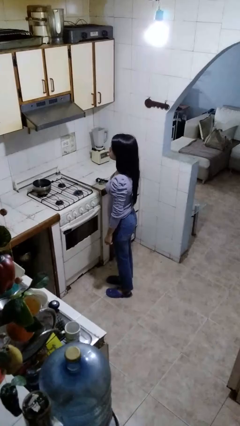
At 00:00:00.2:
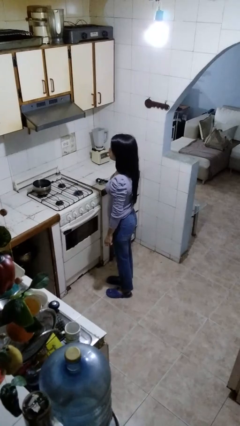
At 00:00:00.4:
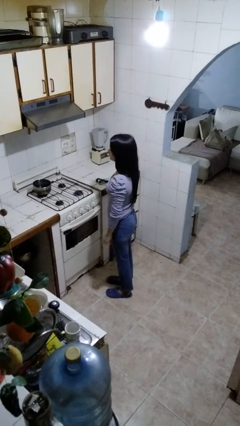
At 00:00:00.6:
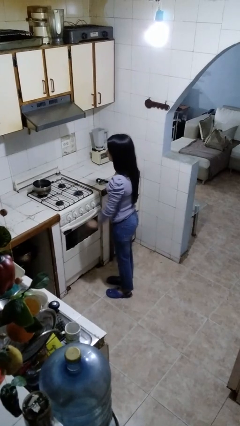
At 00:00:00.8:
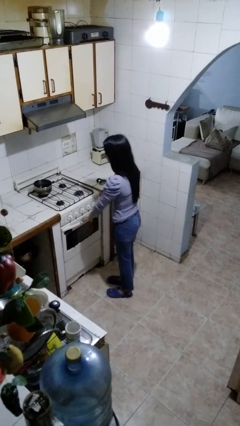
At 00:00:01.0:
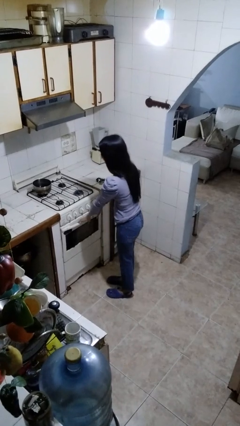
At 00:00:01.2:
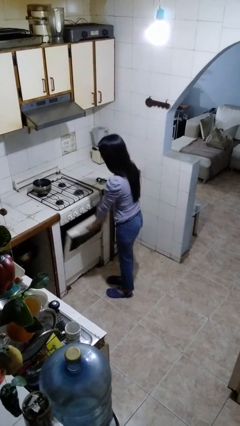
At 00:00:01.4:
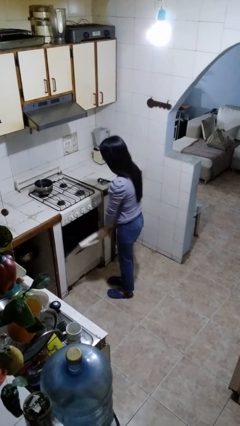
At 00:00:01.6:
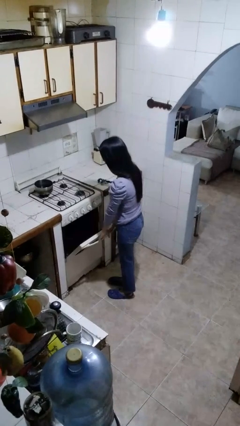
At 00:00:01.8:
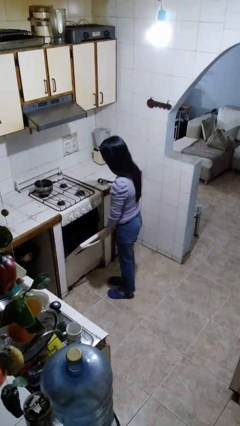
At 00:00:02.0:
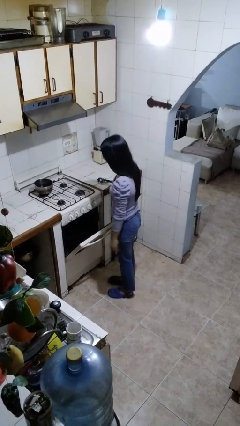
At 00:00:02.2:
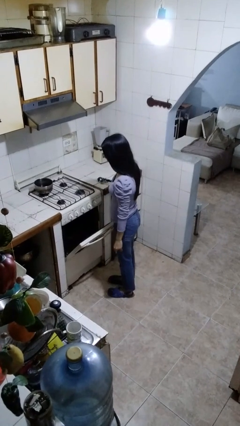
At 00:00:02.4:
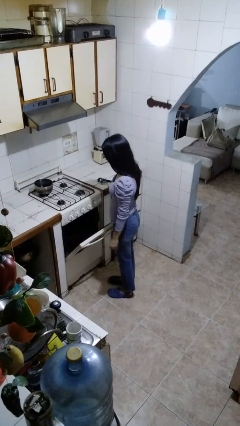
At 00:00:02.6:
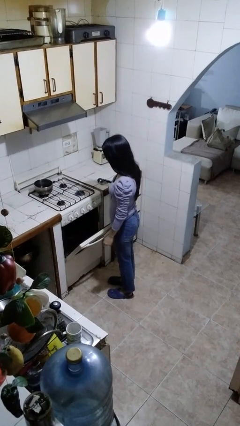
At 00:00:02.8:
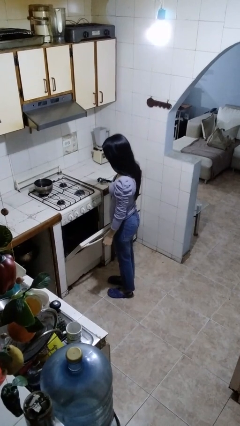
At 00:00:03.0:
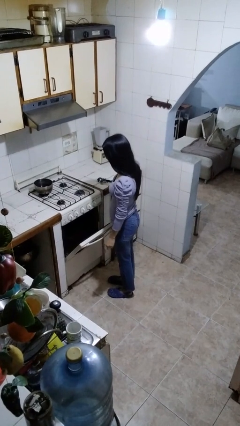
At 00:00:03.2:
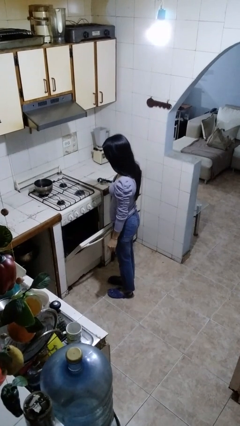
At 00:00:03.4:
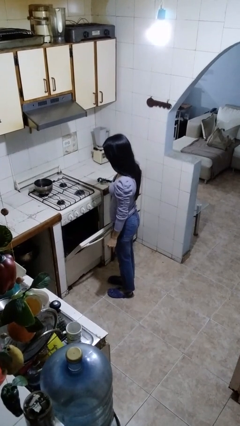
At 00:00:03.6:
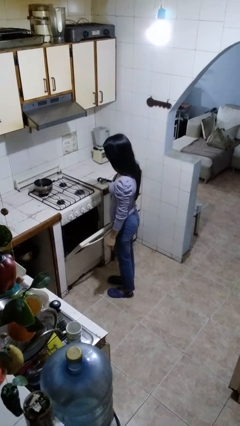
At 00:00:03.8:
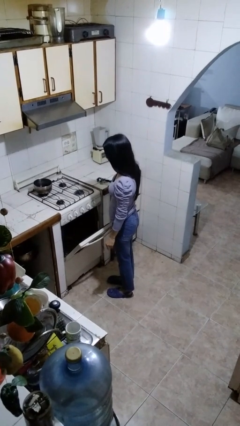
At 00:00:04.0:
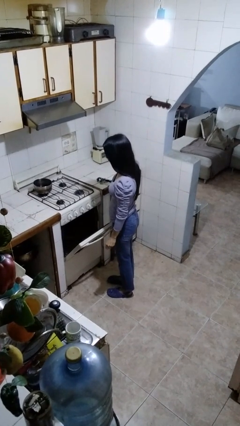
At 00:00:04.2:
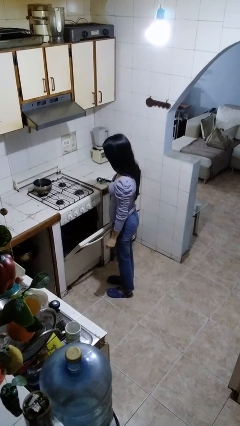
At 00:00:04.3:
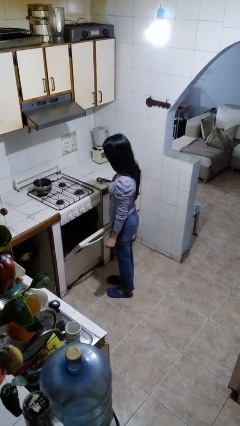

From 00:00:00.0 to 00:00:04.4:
person opens oven door

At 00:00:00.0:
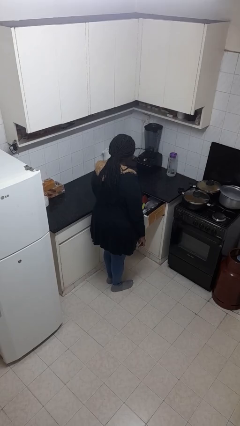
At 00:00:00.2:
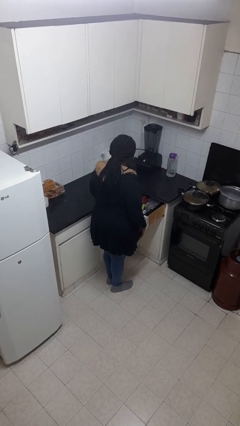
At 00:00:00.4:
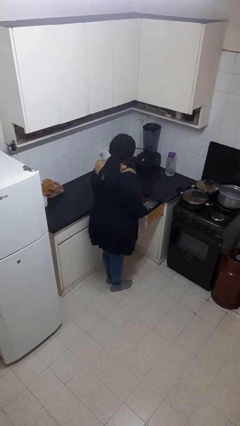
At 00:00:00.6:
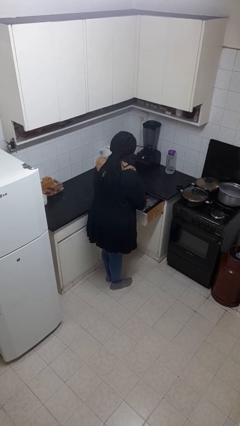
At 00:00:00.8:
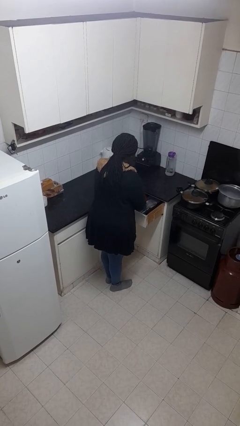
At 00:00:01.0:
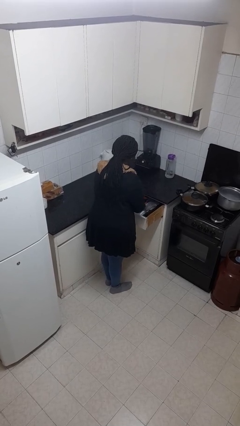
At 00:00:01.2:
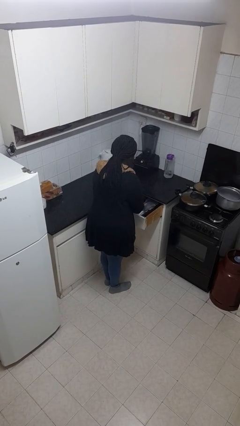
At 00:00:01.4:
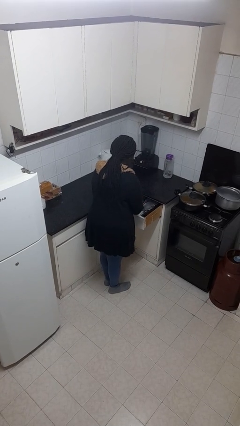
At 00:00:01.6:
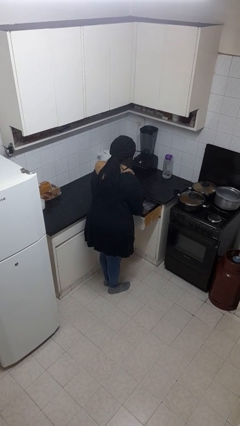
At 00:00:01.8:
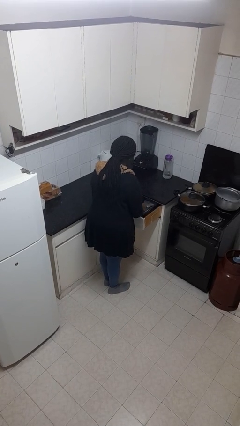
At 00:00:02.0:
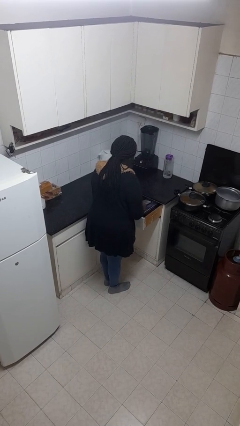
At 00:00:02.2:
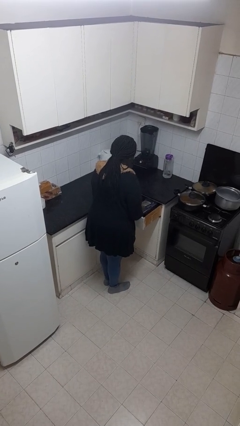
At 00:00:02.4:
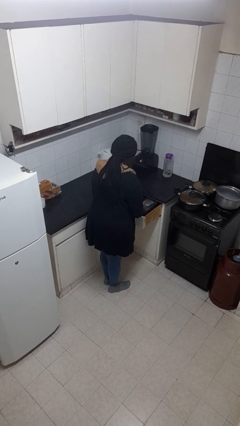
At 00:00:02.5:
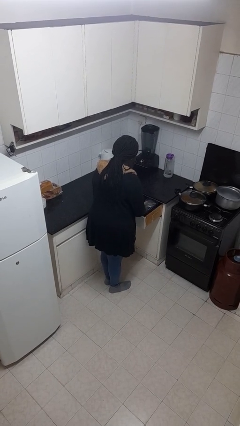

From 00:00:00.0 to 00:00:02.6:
person searches in kitchen drawer

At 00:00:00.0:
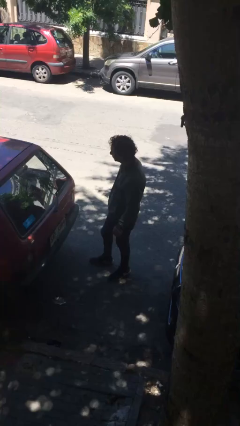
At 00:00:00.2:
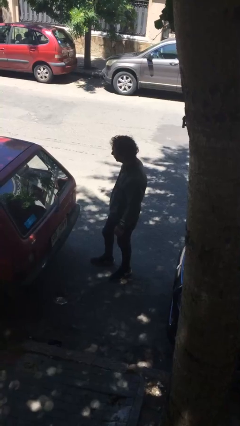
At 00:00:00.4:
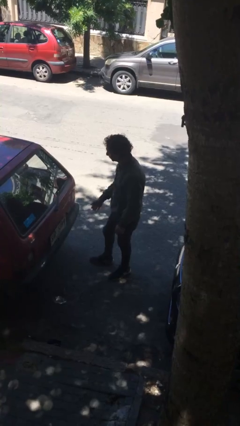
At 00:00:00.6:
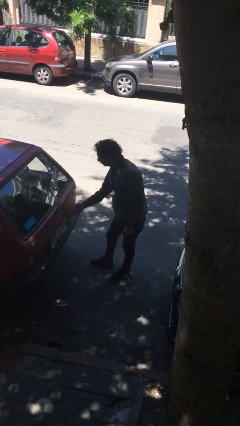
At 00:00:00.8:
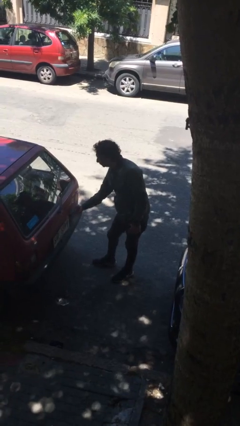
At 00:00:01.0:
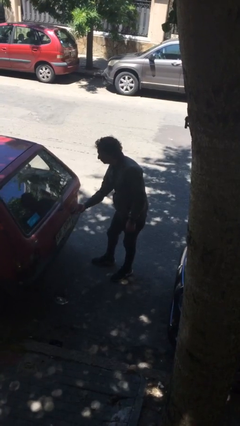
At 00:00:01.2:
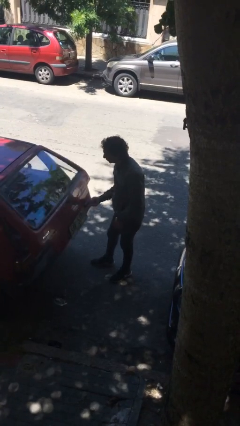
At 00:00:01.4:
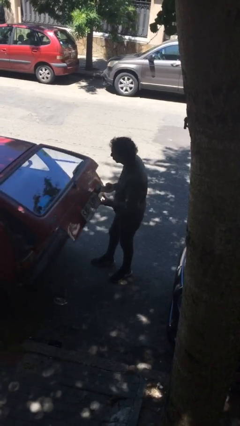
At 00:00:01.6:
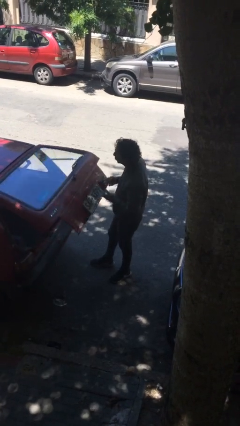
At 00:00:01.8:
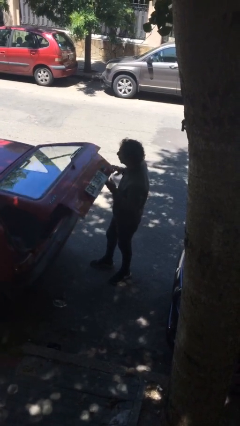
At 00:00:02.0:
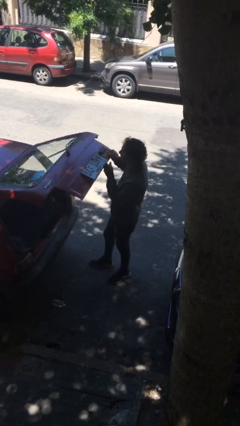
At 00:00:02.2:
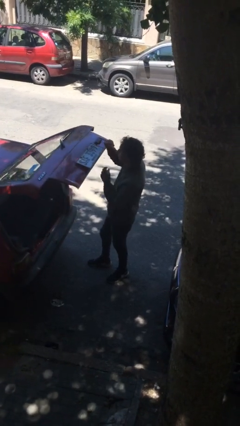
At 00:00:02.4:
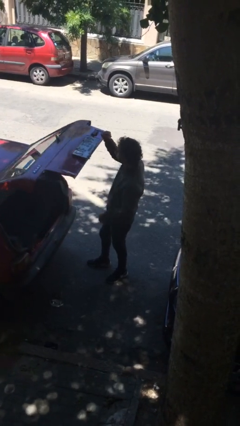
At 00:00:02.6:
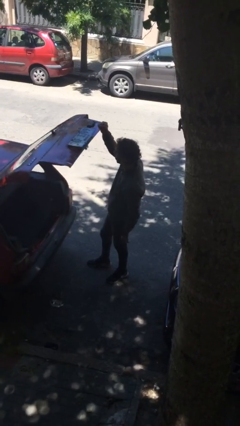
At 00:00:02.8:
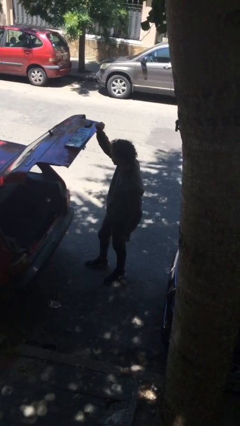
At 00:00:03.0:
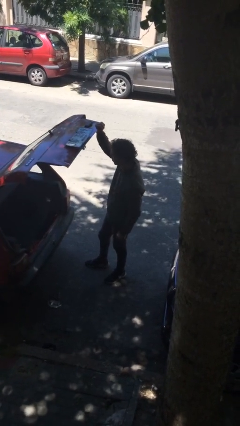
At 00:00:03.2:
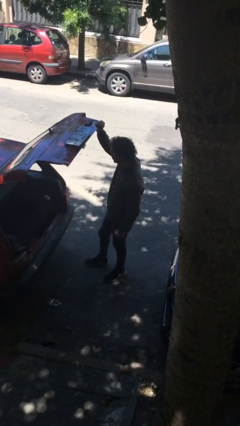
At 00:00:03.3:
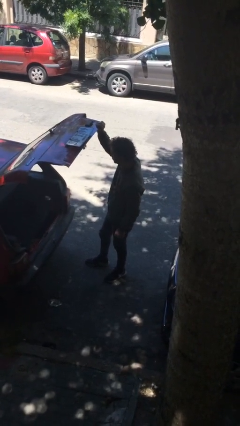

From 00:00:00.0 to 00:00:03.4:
person opens car trunk

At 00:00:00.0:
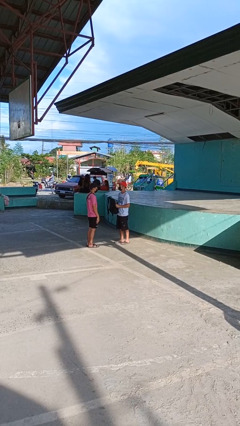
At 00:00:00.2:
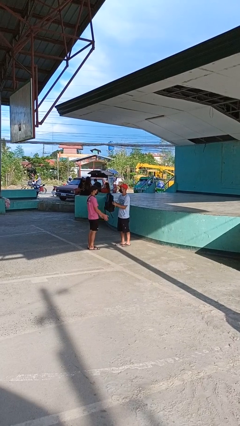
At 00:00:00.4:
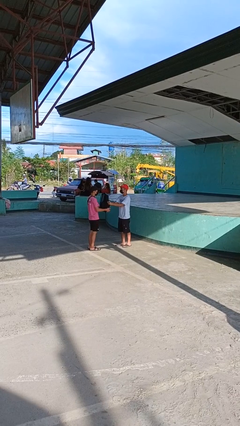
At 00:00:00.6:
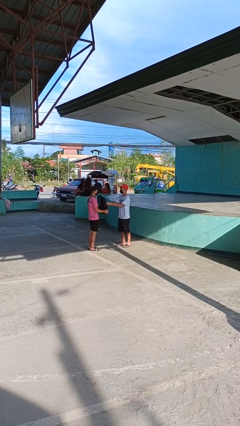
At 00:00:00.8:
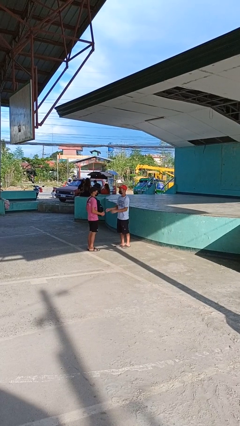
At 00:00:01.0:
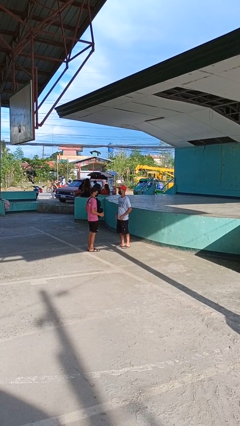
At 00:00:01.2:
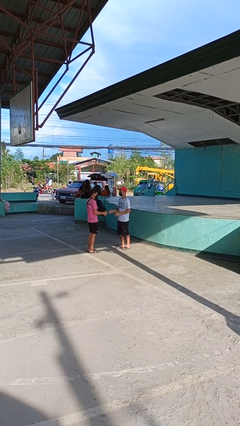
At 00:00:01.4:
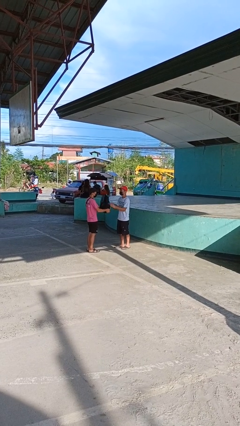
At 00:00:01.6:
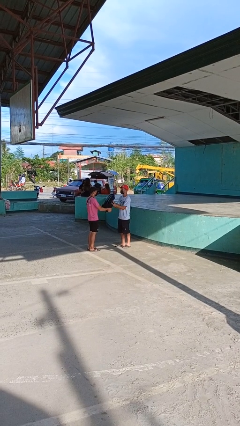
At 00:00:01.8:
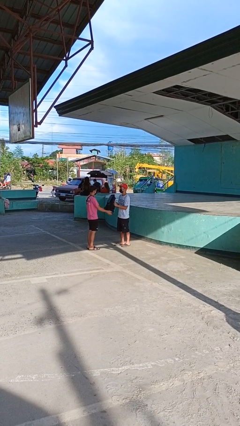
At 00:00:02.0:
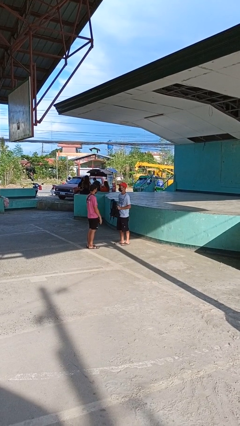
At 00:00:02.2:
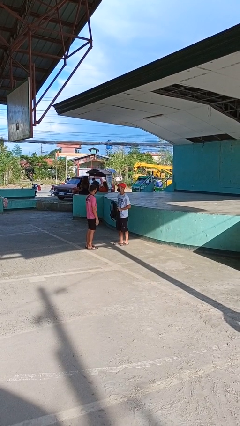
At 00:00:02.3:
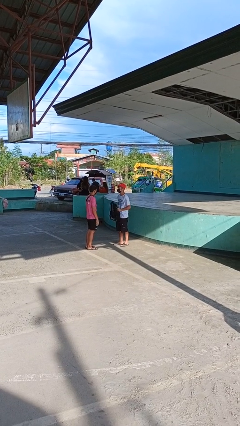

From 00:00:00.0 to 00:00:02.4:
person transfers object to person

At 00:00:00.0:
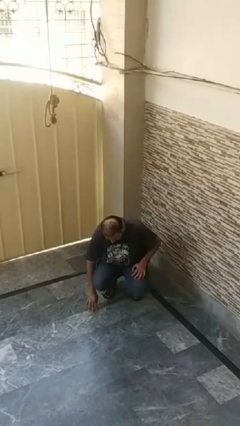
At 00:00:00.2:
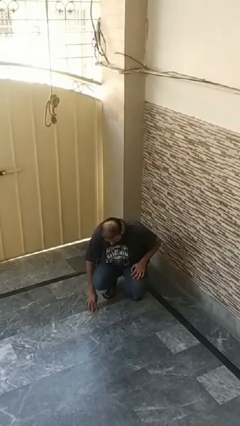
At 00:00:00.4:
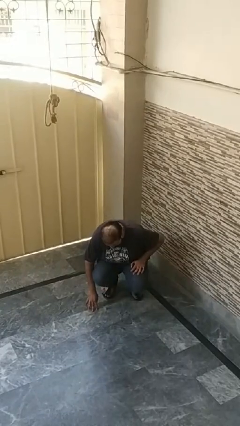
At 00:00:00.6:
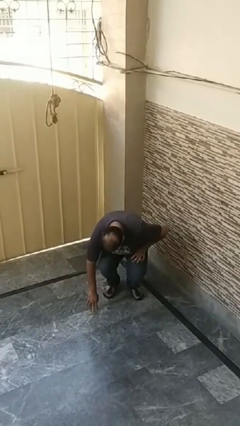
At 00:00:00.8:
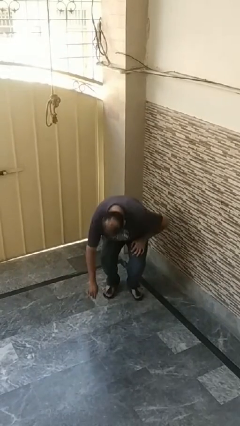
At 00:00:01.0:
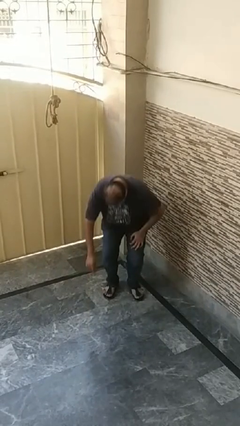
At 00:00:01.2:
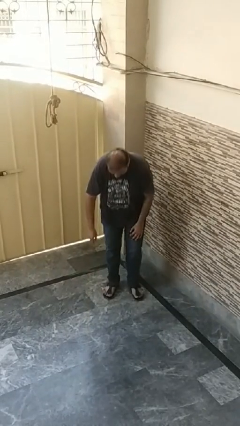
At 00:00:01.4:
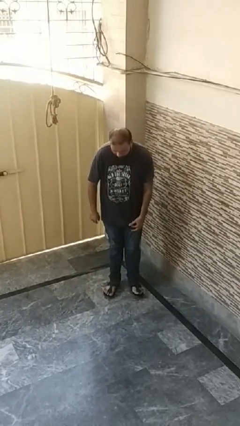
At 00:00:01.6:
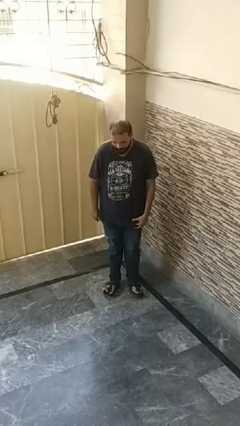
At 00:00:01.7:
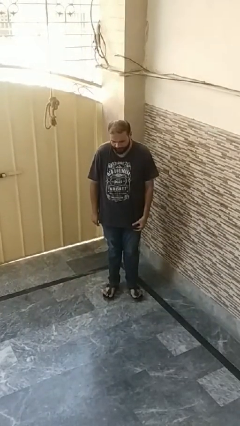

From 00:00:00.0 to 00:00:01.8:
person stands up from floor

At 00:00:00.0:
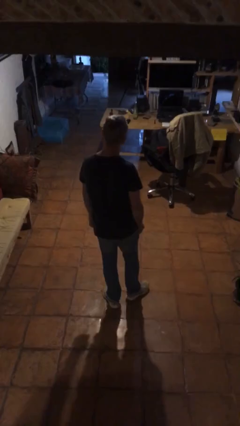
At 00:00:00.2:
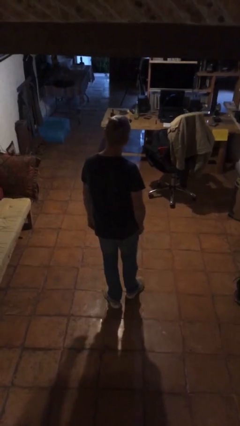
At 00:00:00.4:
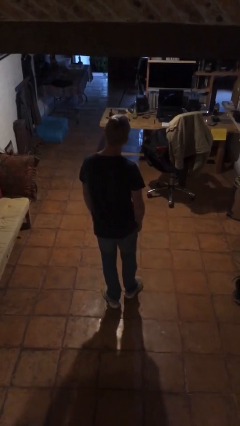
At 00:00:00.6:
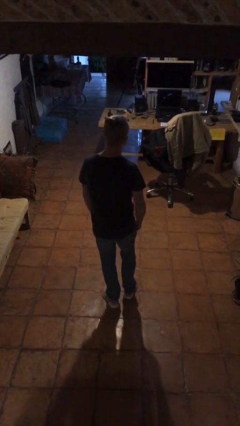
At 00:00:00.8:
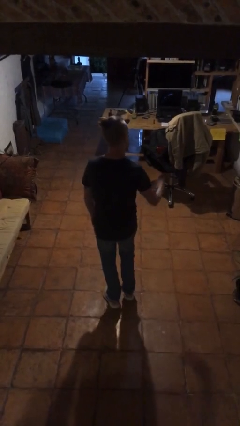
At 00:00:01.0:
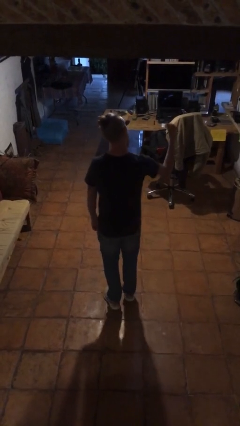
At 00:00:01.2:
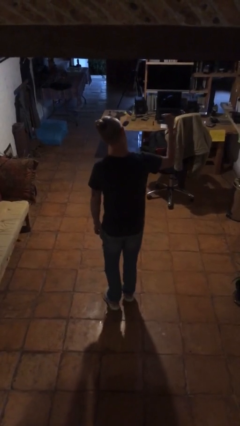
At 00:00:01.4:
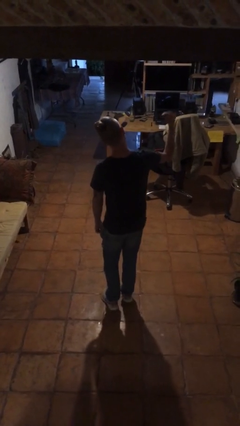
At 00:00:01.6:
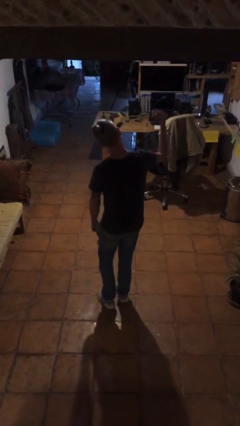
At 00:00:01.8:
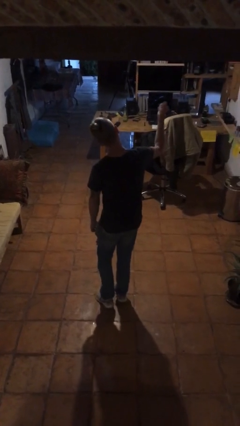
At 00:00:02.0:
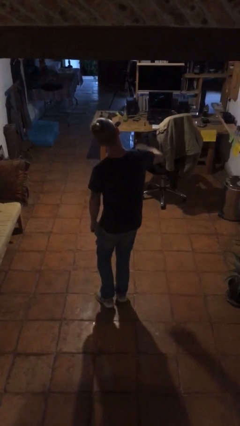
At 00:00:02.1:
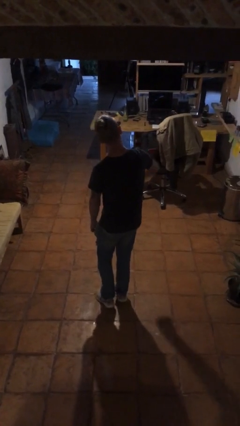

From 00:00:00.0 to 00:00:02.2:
person snaps fingers
